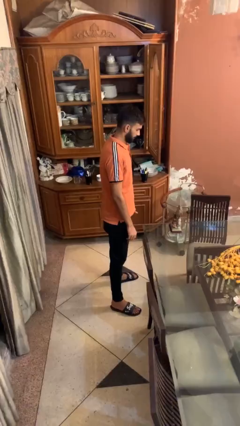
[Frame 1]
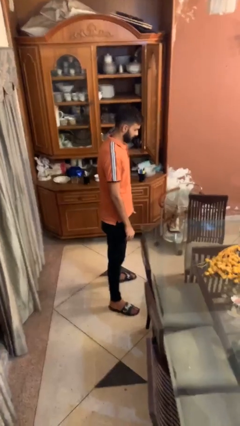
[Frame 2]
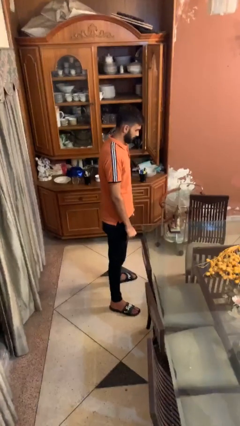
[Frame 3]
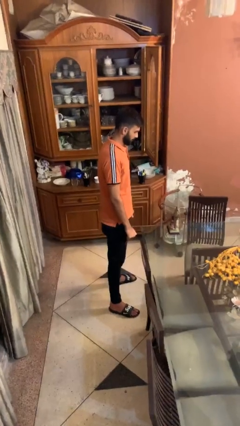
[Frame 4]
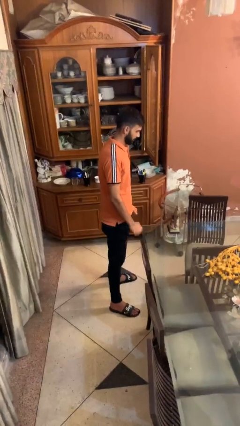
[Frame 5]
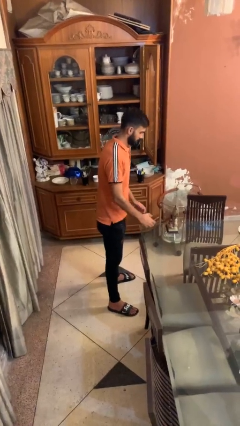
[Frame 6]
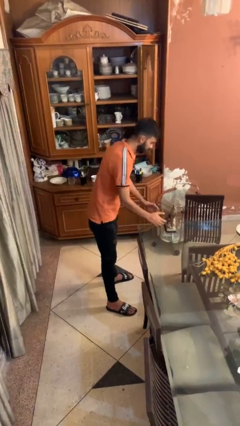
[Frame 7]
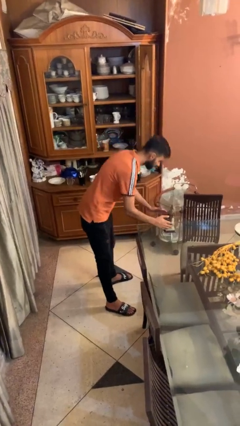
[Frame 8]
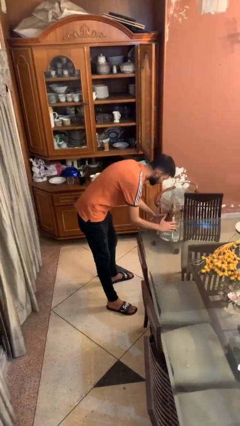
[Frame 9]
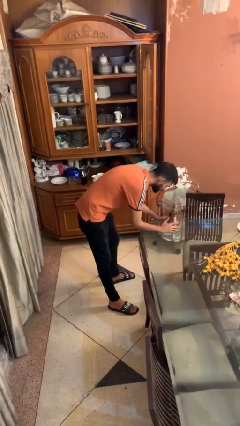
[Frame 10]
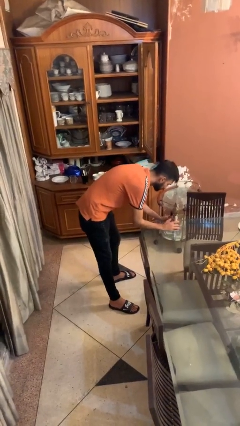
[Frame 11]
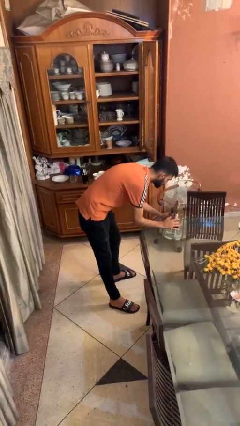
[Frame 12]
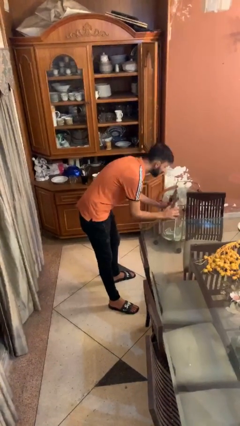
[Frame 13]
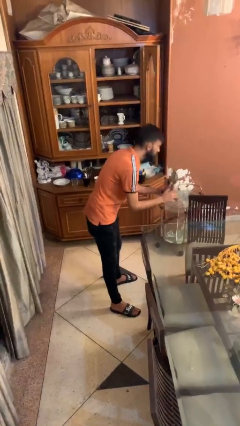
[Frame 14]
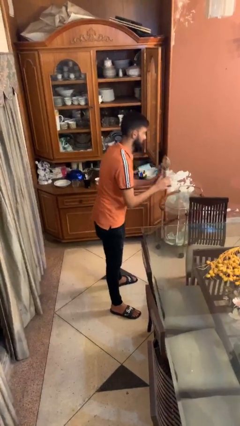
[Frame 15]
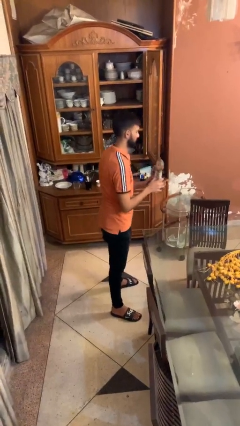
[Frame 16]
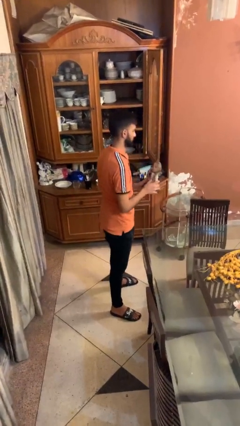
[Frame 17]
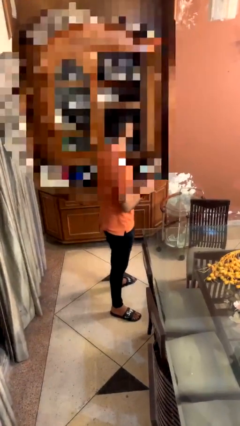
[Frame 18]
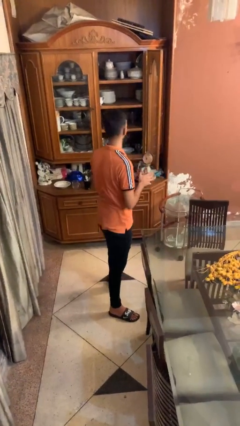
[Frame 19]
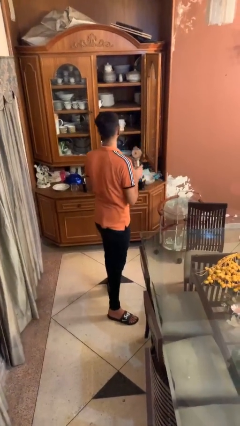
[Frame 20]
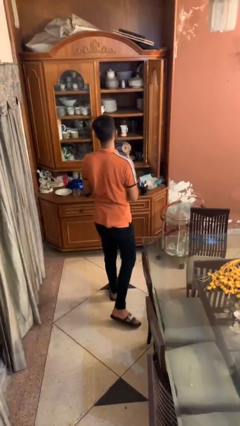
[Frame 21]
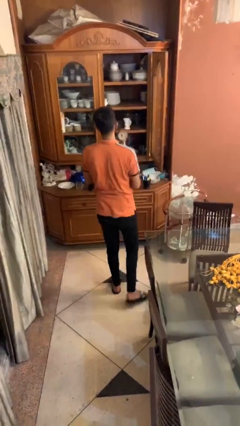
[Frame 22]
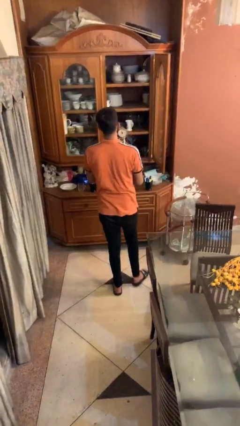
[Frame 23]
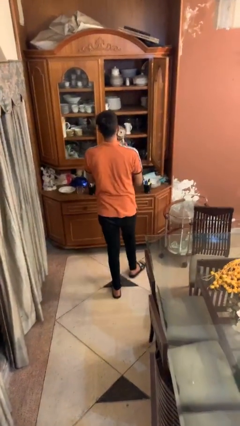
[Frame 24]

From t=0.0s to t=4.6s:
person picks up object from table

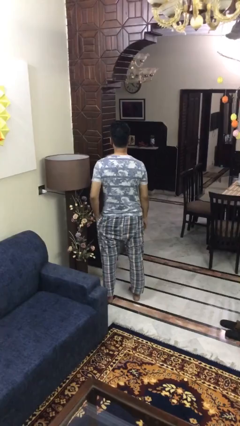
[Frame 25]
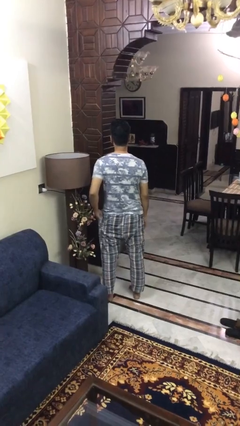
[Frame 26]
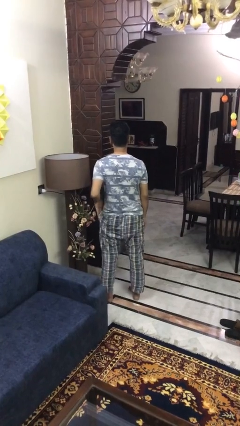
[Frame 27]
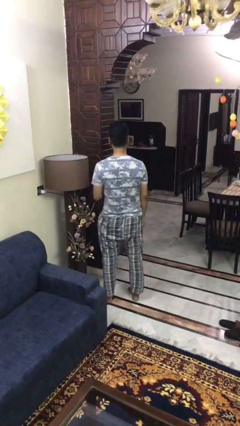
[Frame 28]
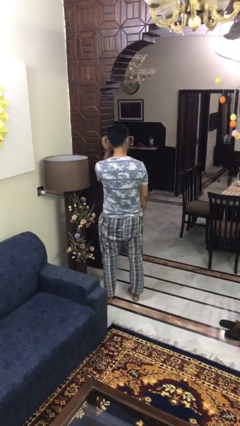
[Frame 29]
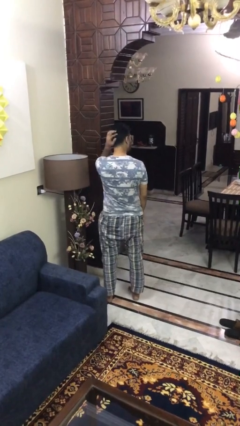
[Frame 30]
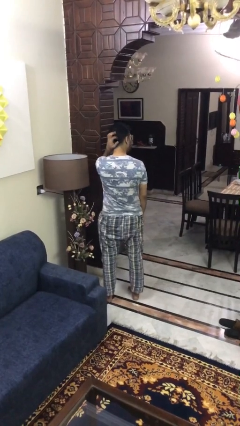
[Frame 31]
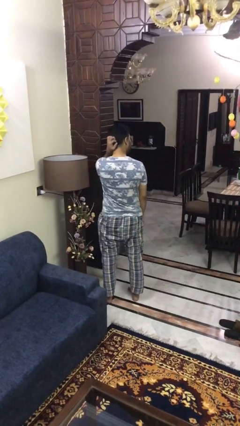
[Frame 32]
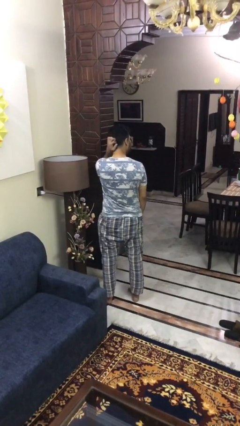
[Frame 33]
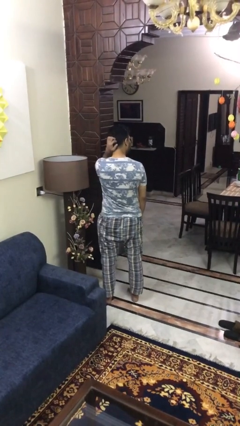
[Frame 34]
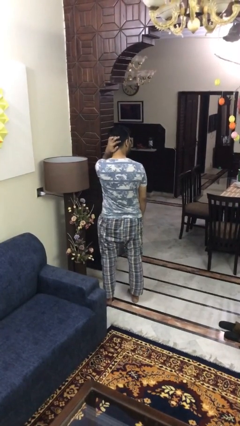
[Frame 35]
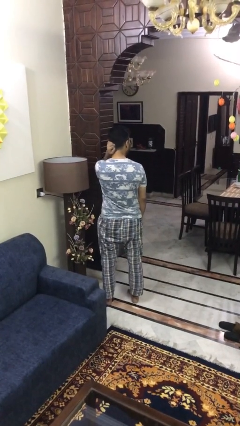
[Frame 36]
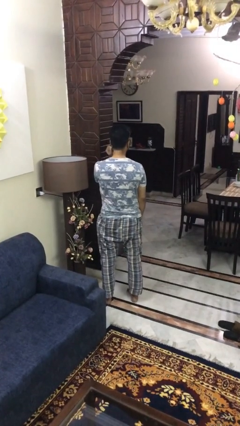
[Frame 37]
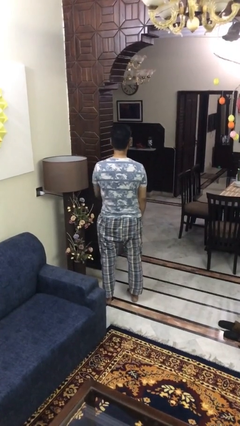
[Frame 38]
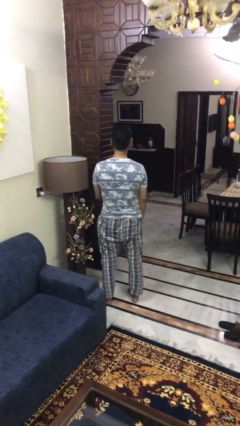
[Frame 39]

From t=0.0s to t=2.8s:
person scratches face

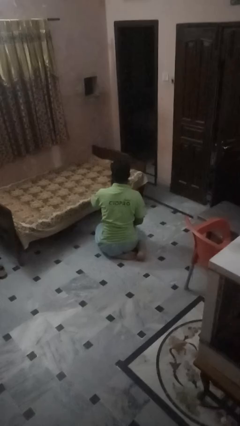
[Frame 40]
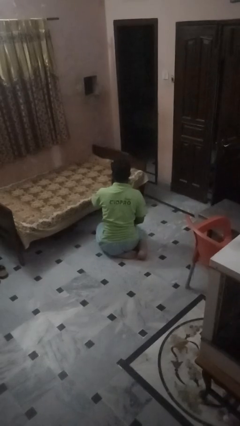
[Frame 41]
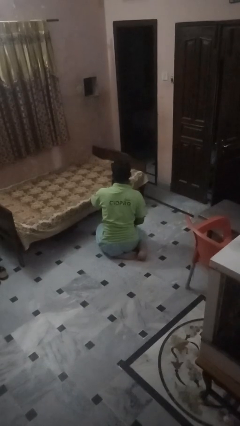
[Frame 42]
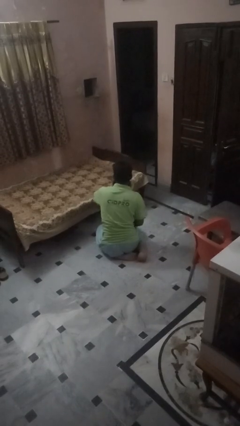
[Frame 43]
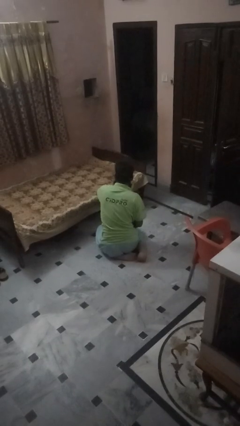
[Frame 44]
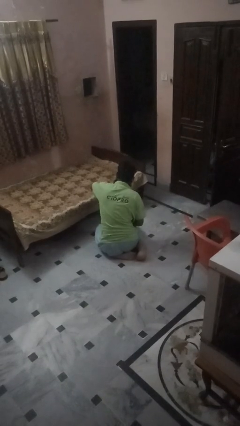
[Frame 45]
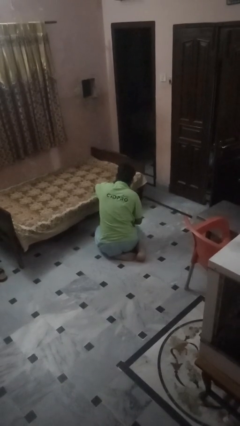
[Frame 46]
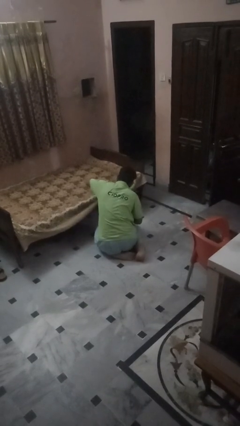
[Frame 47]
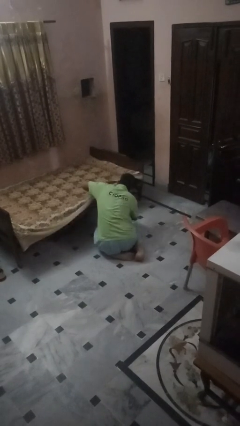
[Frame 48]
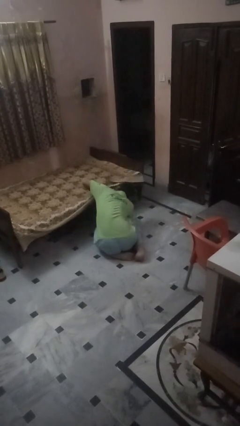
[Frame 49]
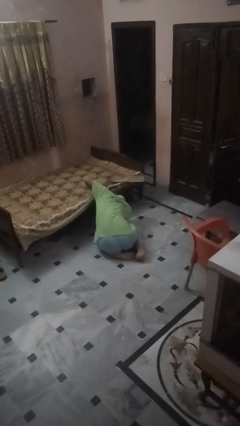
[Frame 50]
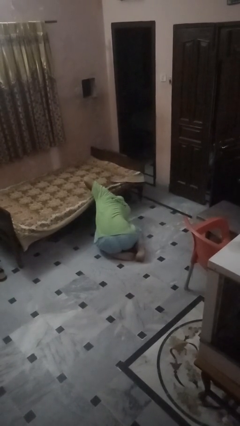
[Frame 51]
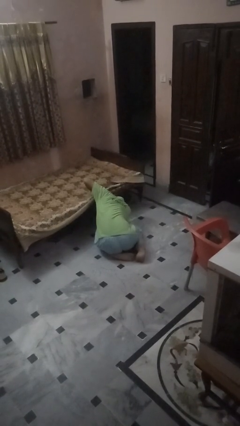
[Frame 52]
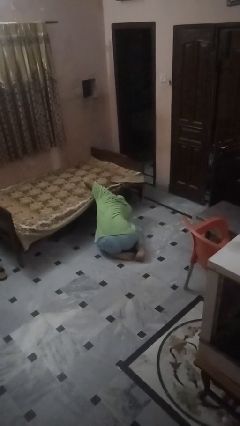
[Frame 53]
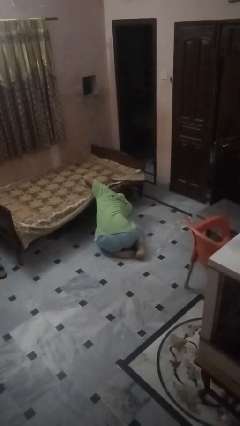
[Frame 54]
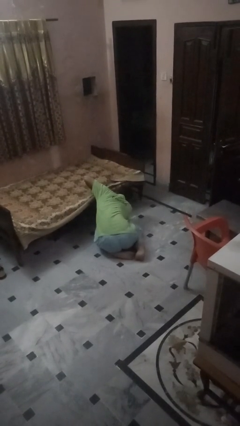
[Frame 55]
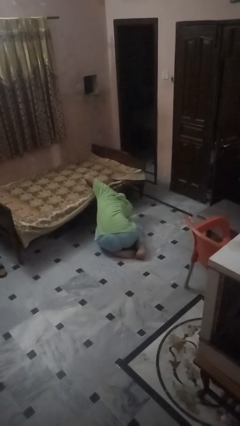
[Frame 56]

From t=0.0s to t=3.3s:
person searches under bed

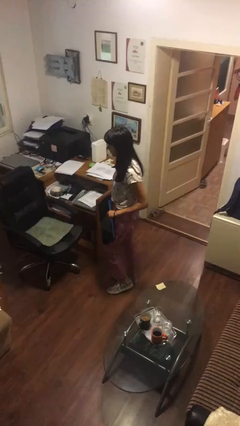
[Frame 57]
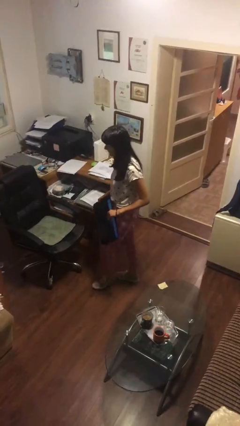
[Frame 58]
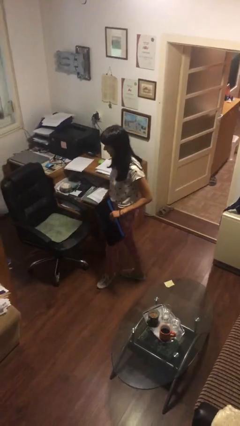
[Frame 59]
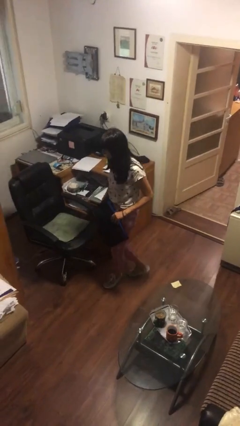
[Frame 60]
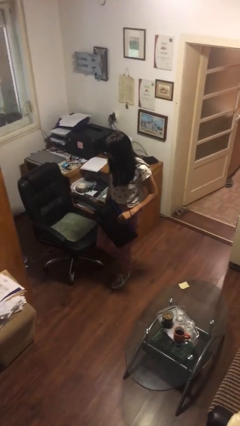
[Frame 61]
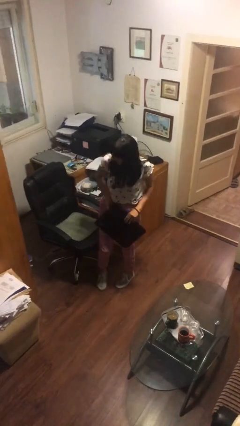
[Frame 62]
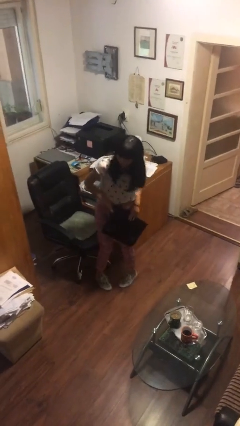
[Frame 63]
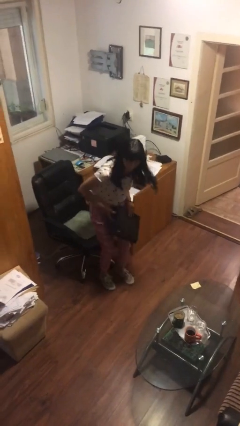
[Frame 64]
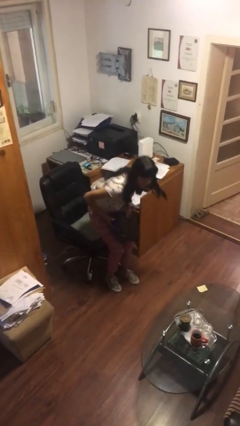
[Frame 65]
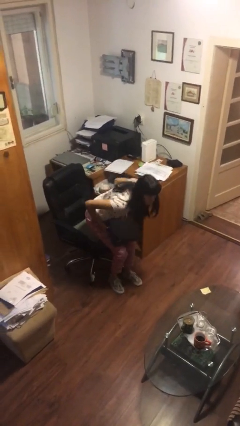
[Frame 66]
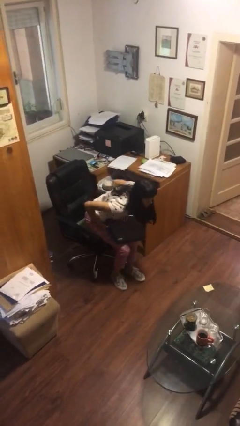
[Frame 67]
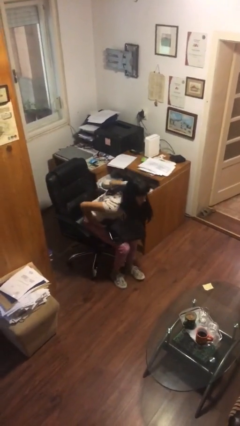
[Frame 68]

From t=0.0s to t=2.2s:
person sits down

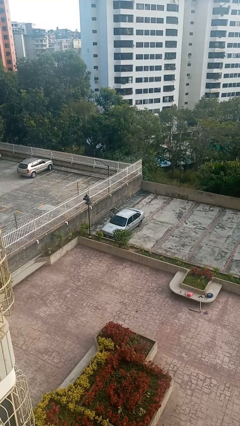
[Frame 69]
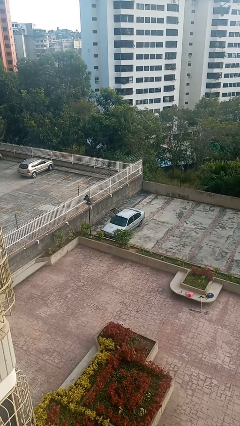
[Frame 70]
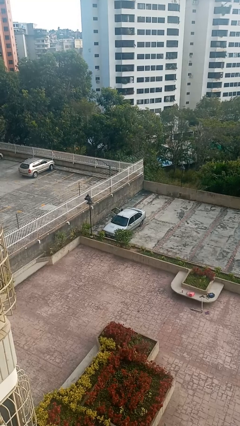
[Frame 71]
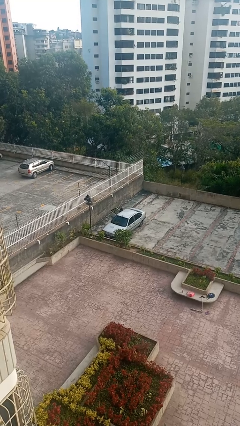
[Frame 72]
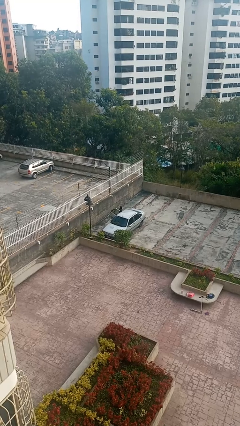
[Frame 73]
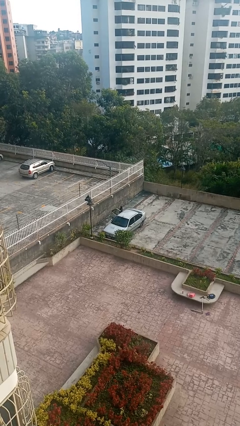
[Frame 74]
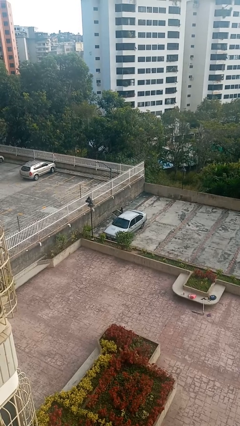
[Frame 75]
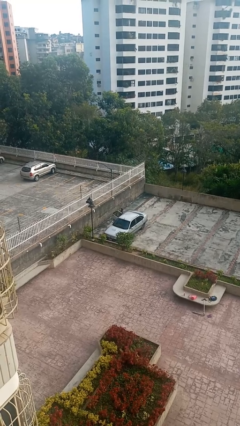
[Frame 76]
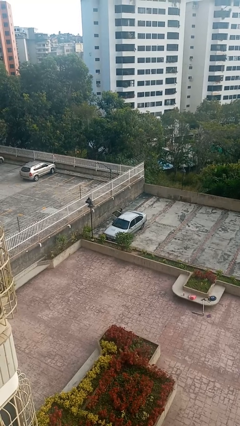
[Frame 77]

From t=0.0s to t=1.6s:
person exits car

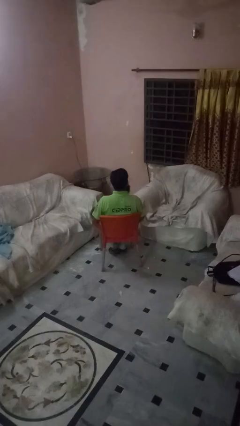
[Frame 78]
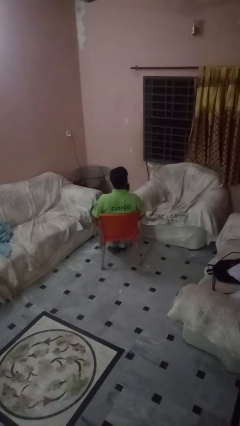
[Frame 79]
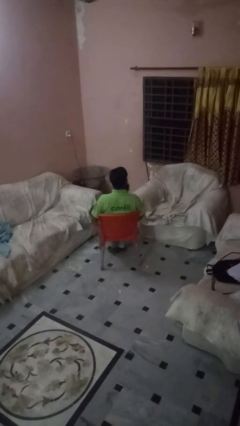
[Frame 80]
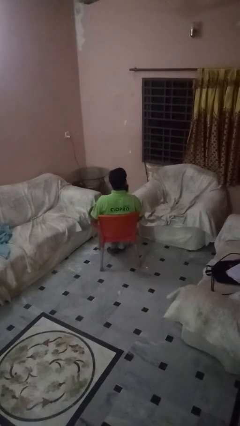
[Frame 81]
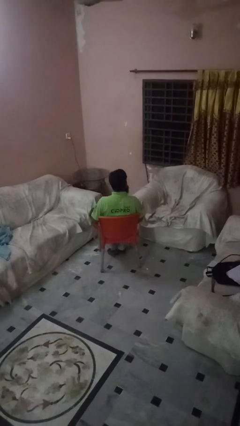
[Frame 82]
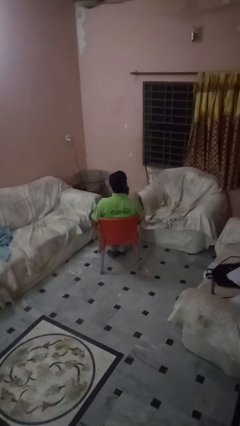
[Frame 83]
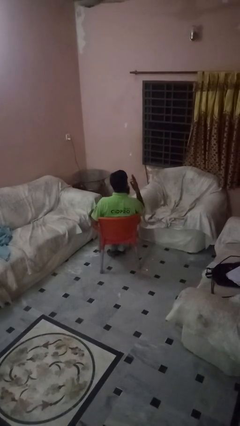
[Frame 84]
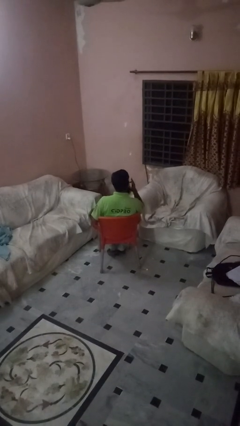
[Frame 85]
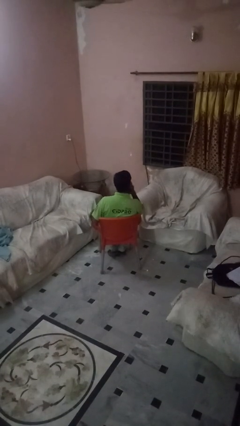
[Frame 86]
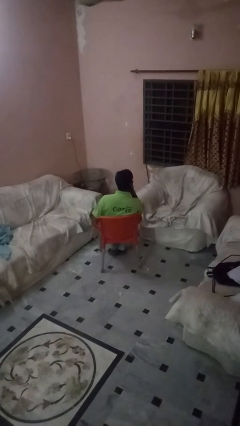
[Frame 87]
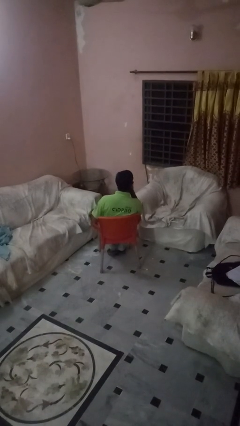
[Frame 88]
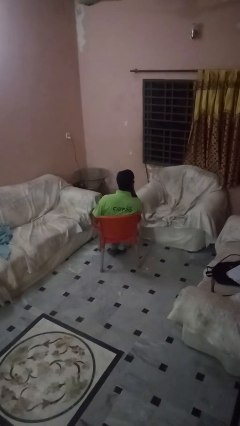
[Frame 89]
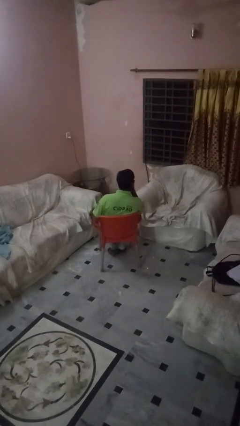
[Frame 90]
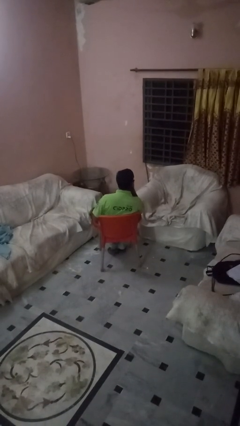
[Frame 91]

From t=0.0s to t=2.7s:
person strokes chin
